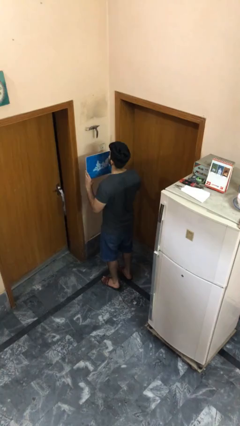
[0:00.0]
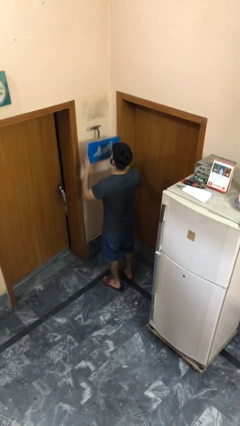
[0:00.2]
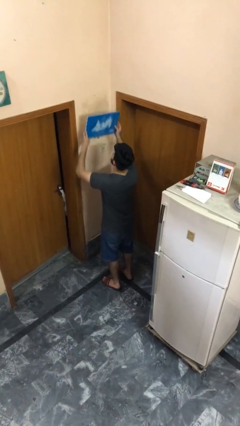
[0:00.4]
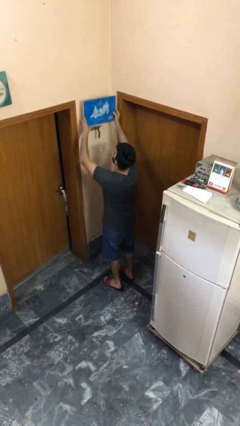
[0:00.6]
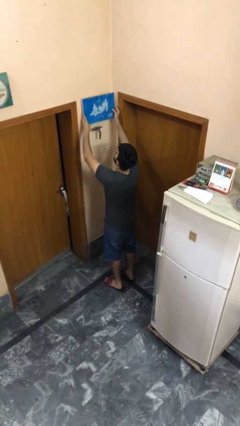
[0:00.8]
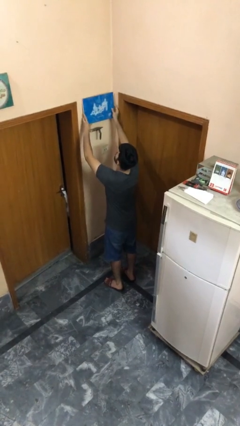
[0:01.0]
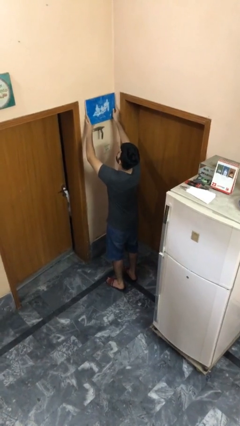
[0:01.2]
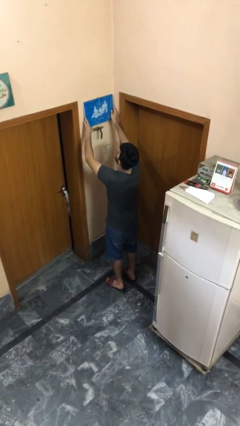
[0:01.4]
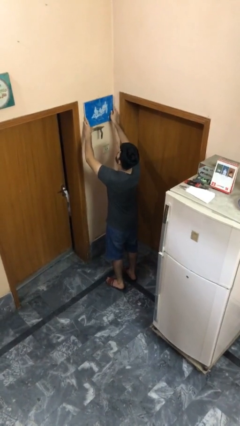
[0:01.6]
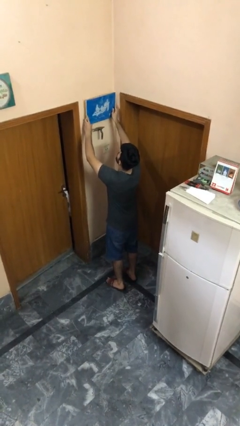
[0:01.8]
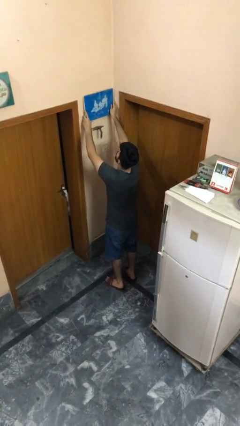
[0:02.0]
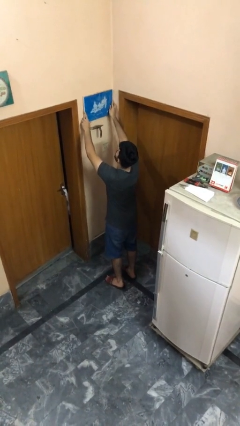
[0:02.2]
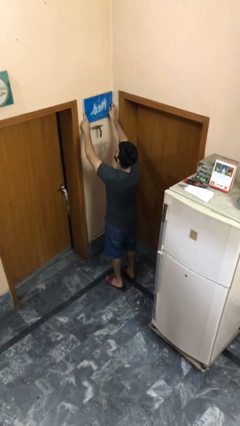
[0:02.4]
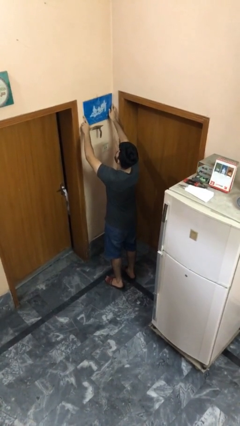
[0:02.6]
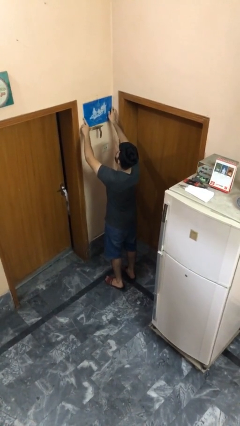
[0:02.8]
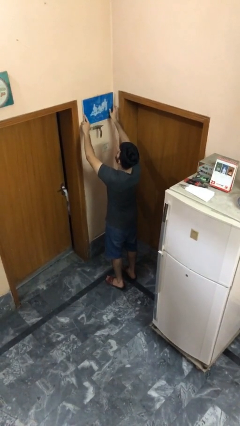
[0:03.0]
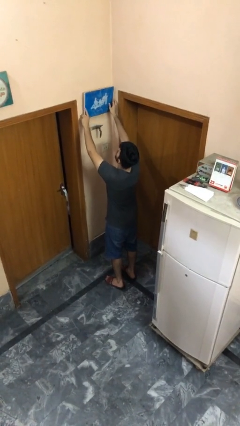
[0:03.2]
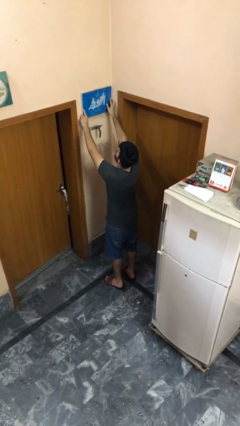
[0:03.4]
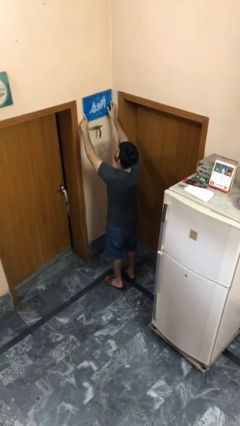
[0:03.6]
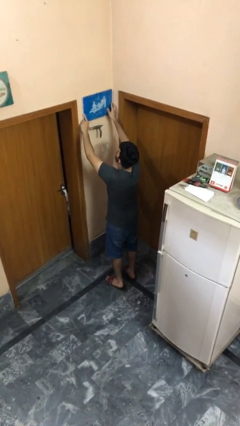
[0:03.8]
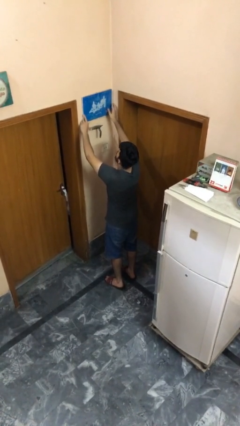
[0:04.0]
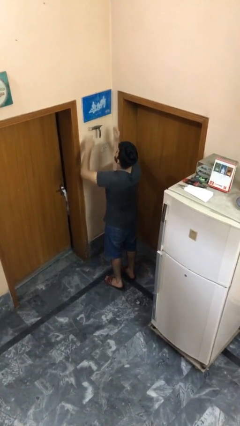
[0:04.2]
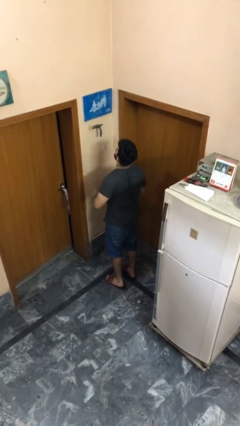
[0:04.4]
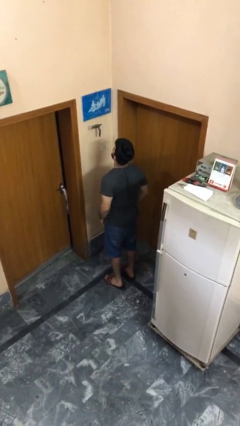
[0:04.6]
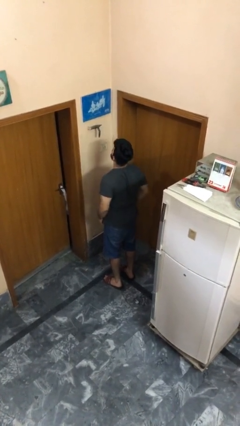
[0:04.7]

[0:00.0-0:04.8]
person puts up picture frame

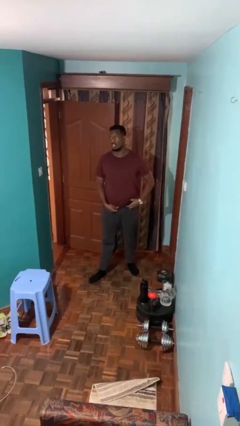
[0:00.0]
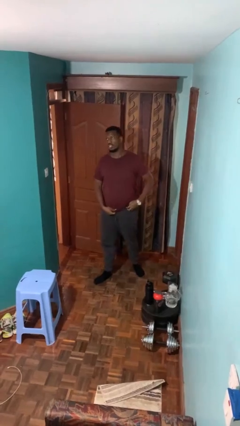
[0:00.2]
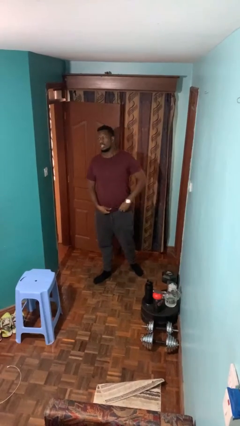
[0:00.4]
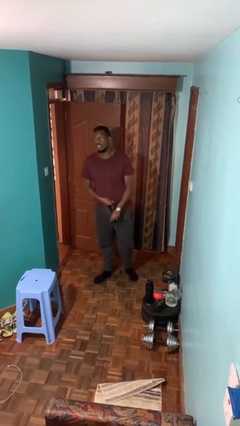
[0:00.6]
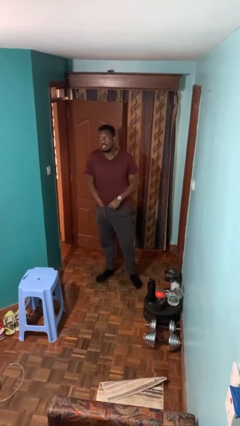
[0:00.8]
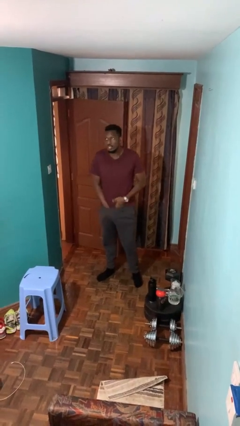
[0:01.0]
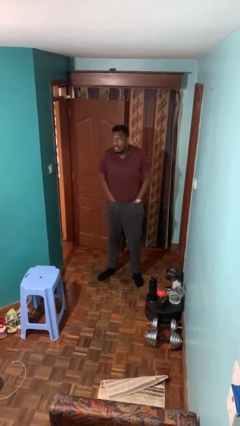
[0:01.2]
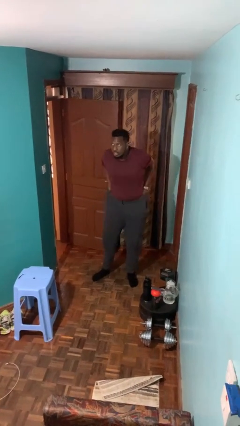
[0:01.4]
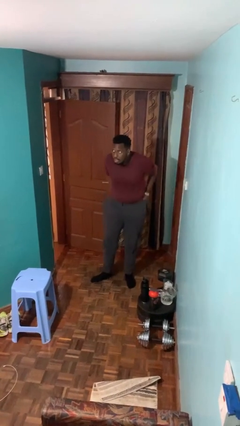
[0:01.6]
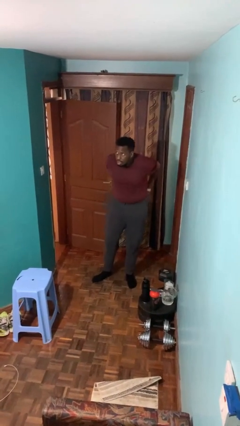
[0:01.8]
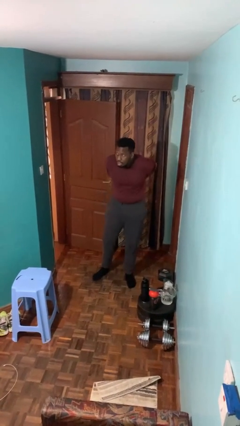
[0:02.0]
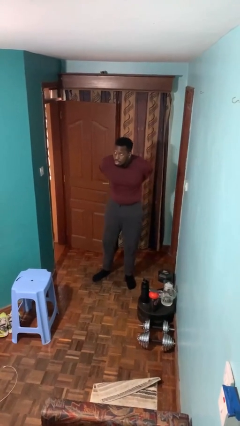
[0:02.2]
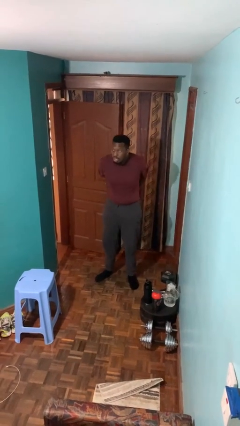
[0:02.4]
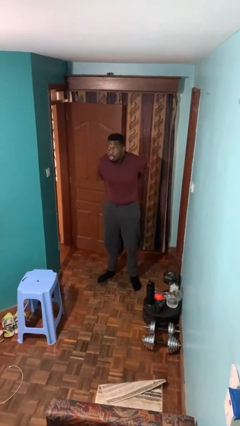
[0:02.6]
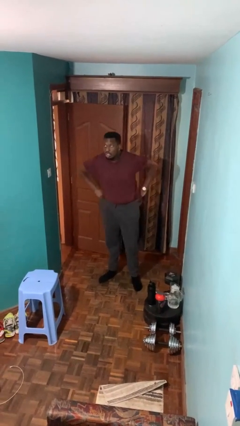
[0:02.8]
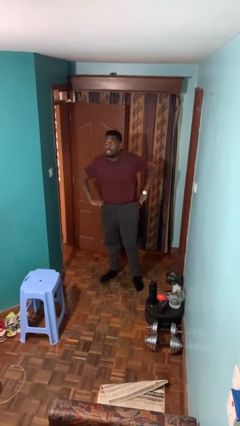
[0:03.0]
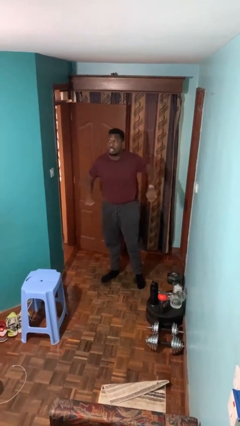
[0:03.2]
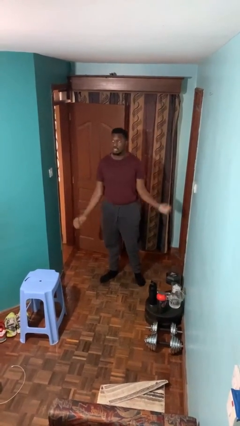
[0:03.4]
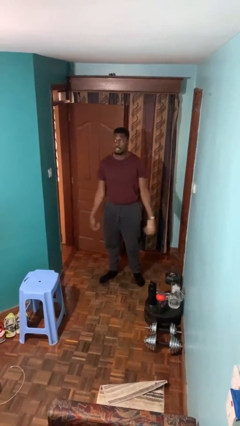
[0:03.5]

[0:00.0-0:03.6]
person tucks in shirt

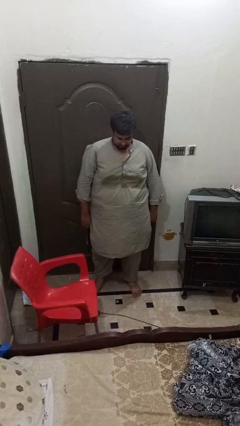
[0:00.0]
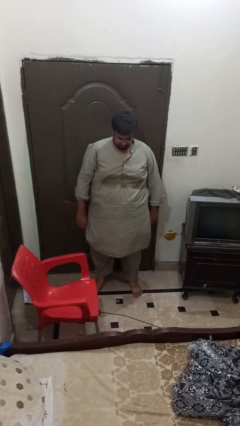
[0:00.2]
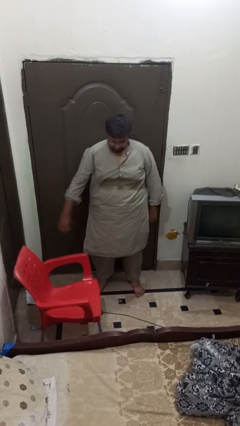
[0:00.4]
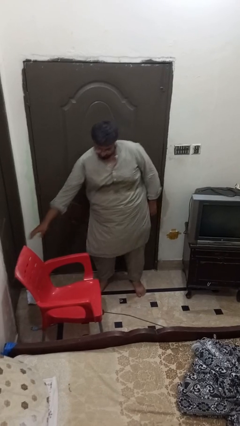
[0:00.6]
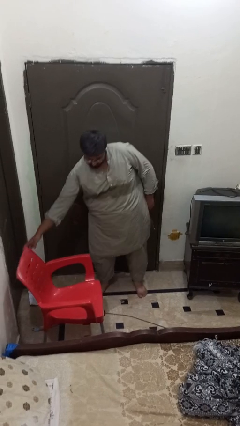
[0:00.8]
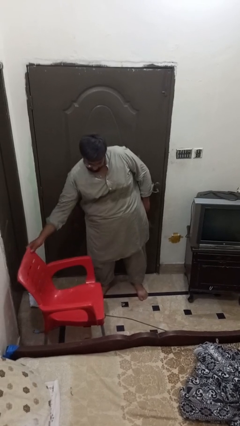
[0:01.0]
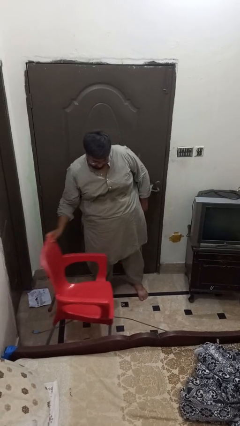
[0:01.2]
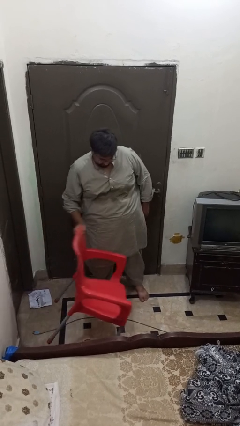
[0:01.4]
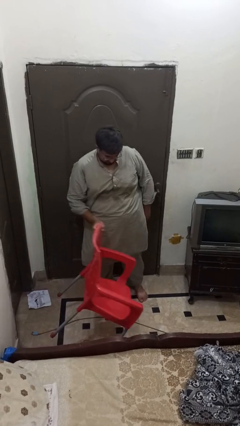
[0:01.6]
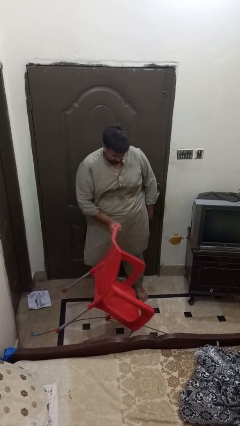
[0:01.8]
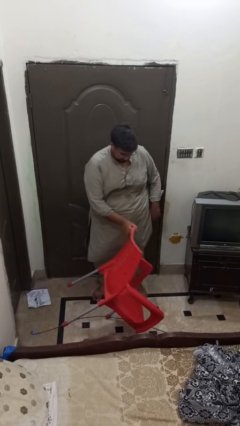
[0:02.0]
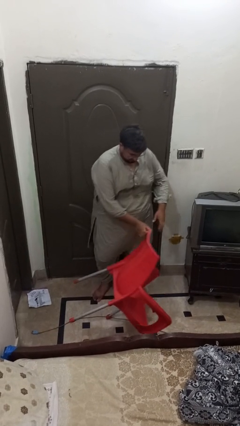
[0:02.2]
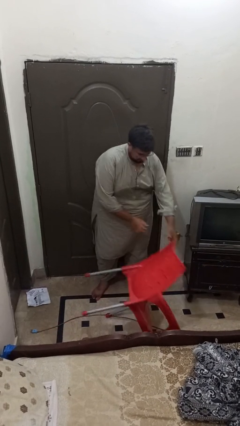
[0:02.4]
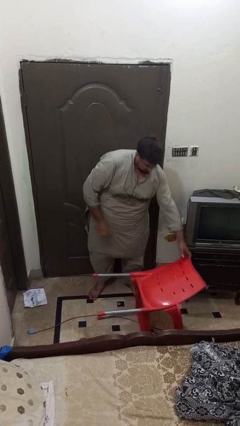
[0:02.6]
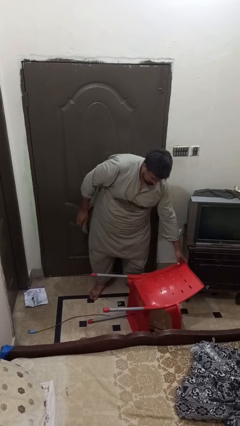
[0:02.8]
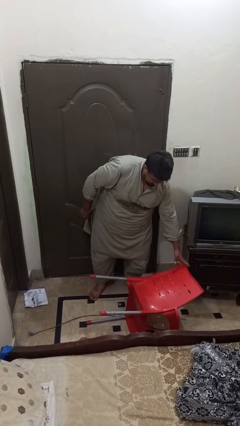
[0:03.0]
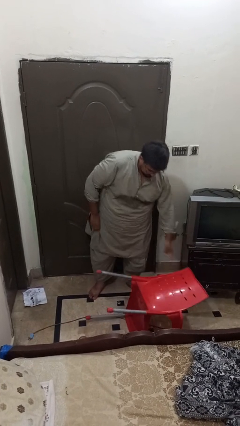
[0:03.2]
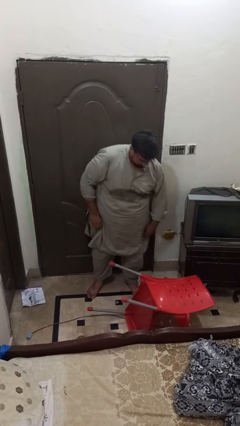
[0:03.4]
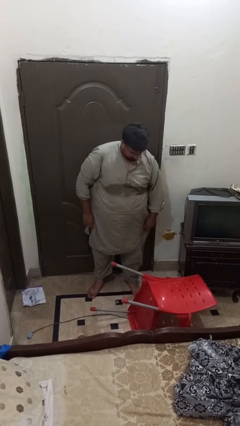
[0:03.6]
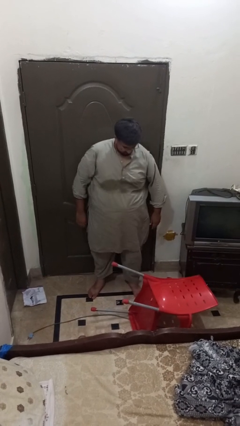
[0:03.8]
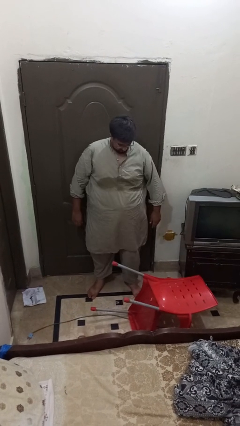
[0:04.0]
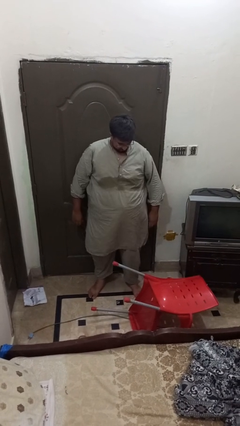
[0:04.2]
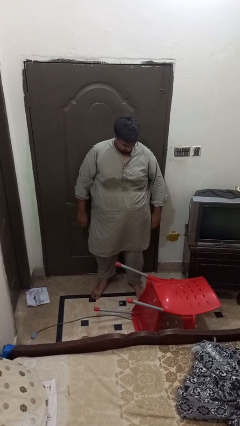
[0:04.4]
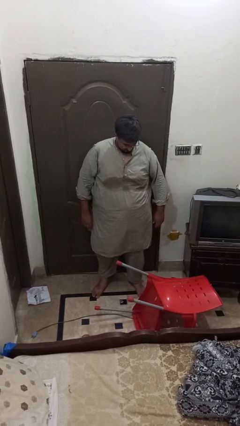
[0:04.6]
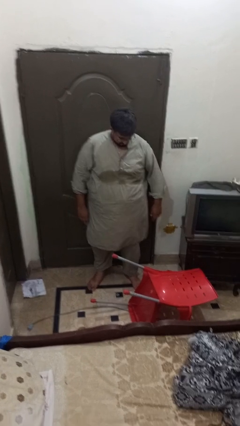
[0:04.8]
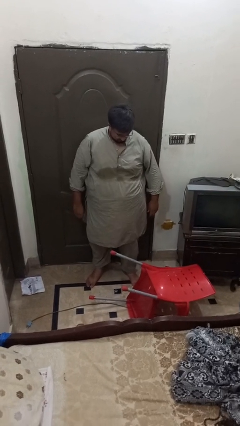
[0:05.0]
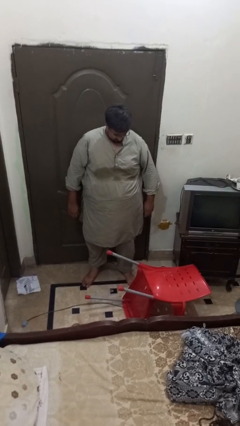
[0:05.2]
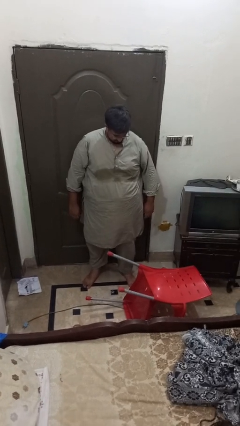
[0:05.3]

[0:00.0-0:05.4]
person knocks over furniture

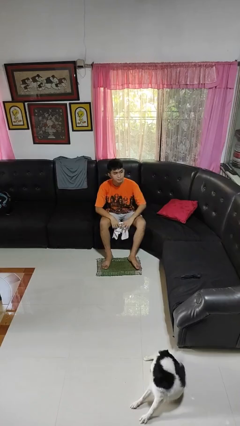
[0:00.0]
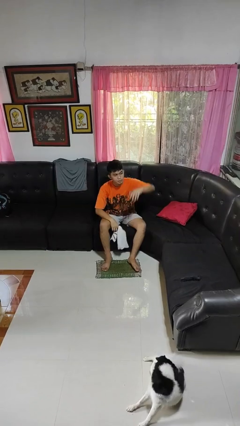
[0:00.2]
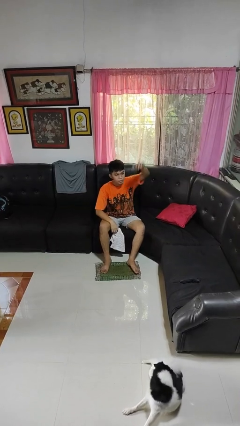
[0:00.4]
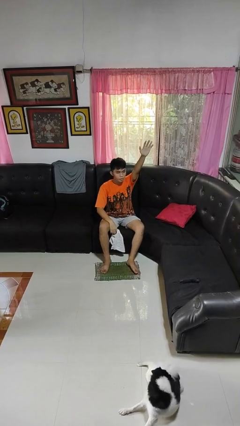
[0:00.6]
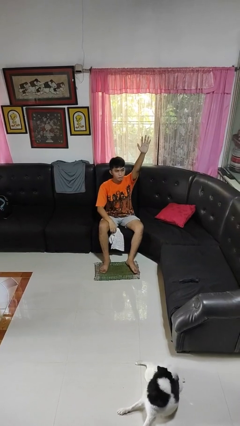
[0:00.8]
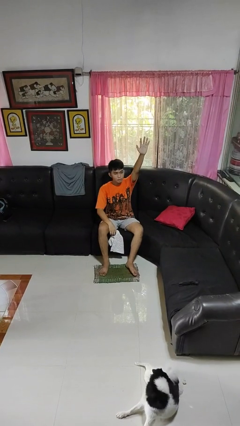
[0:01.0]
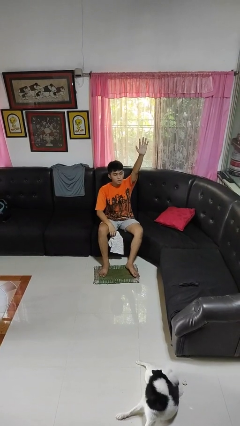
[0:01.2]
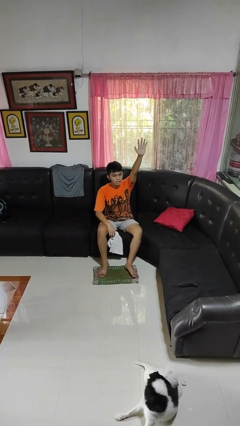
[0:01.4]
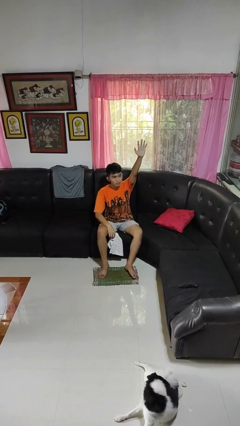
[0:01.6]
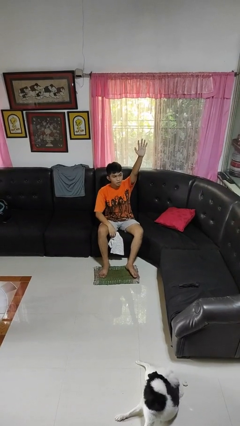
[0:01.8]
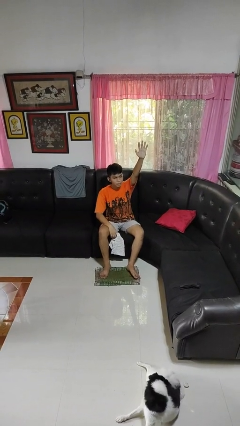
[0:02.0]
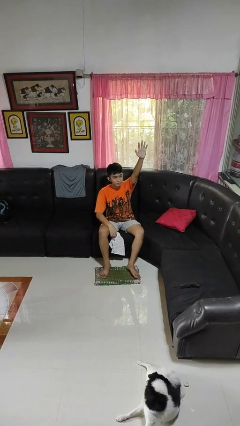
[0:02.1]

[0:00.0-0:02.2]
person gestures raise hand

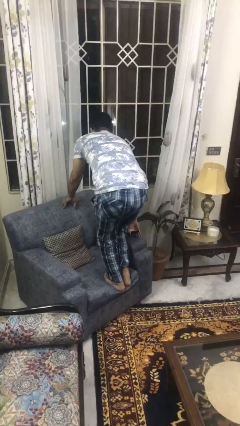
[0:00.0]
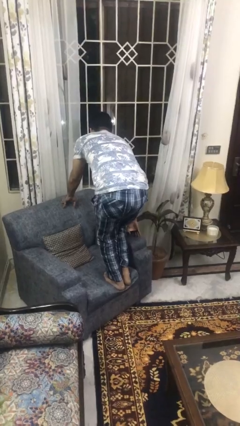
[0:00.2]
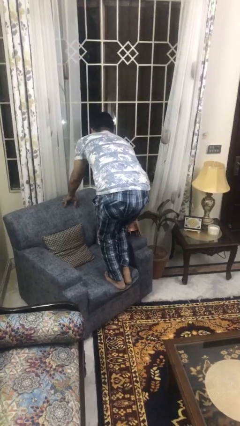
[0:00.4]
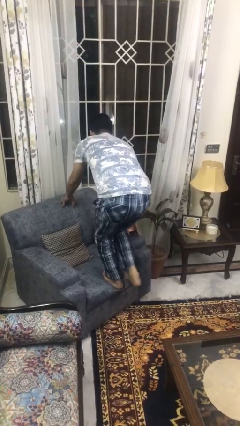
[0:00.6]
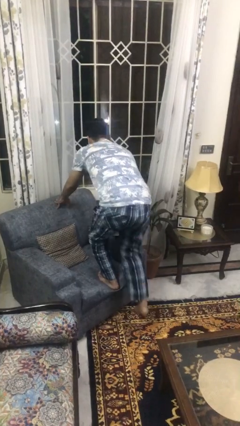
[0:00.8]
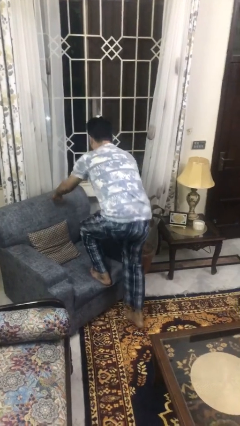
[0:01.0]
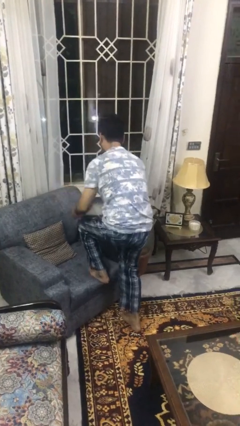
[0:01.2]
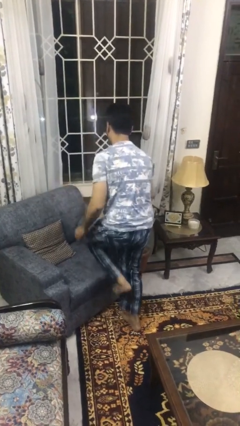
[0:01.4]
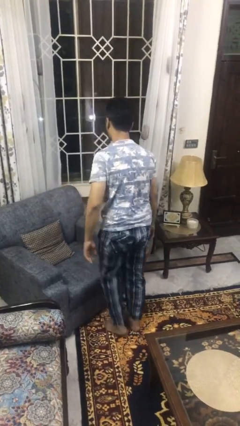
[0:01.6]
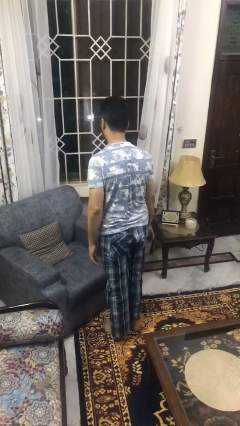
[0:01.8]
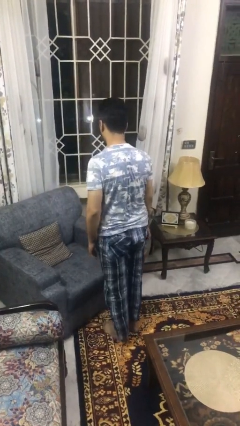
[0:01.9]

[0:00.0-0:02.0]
person climbs off couch
